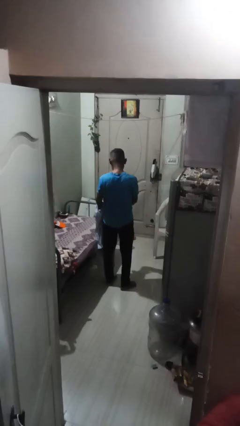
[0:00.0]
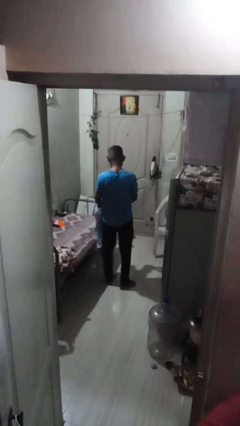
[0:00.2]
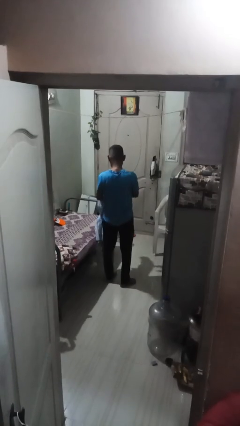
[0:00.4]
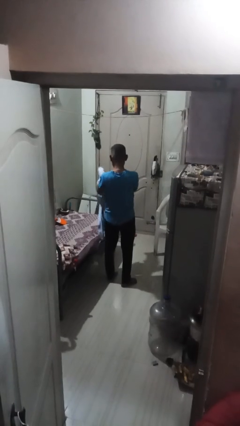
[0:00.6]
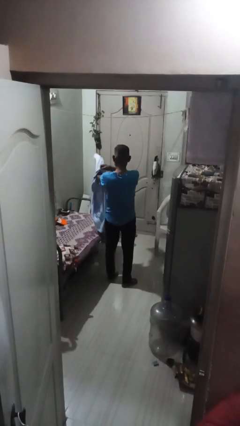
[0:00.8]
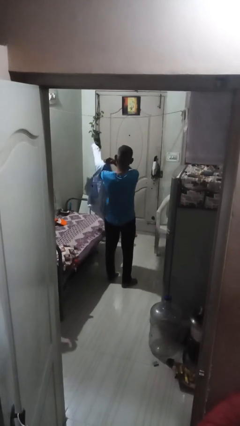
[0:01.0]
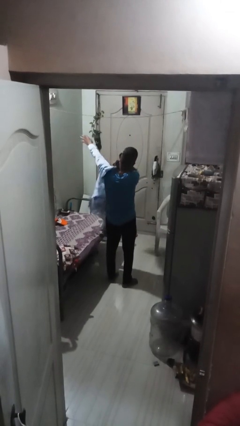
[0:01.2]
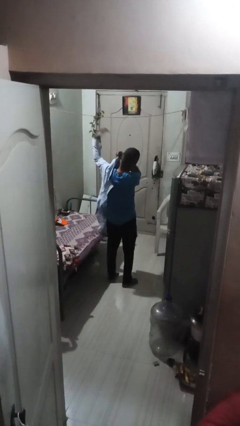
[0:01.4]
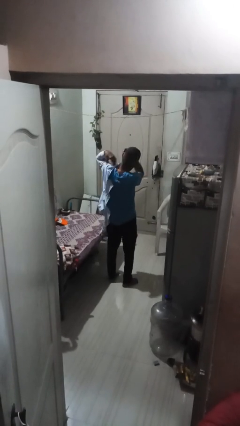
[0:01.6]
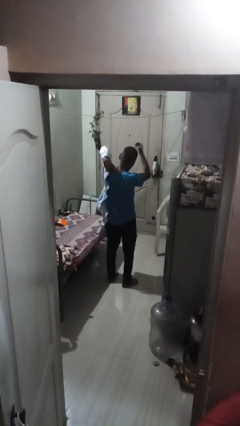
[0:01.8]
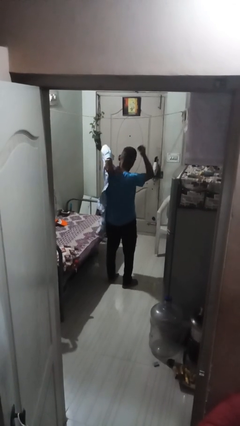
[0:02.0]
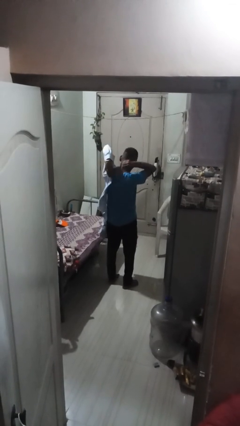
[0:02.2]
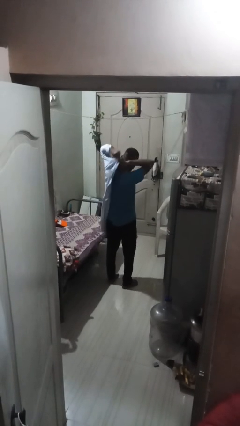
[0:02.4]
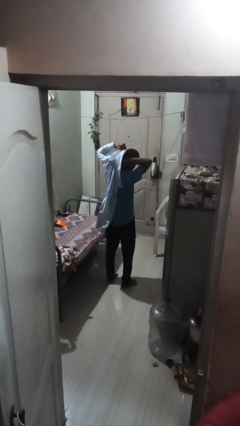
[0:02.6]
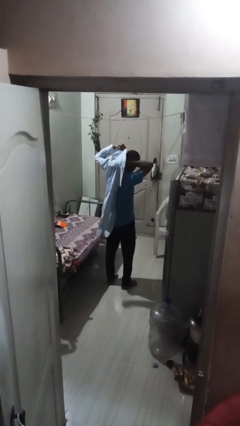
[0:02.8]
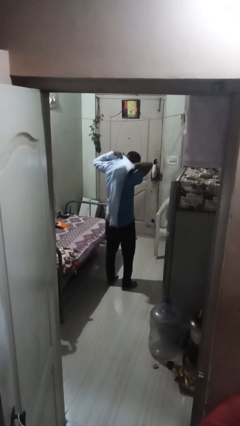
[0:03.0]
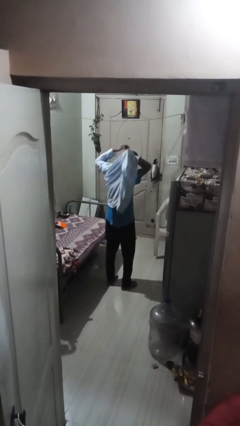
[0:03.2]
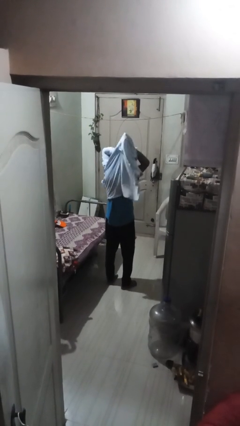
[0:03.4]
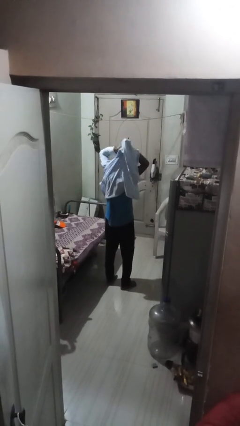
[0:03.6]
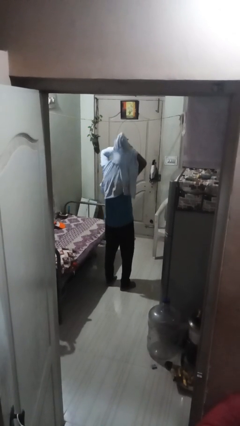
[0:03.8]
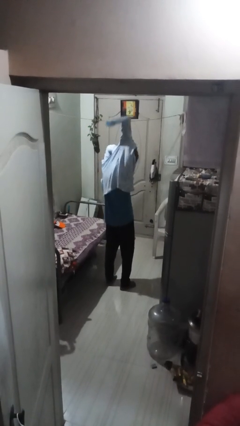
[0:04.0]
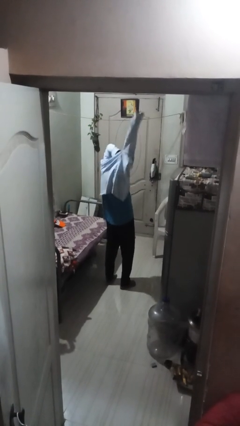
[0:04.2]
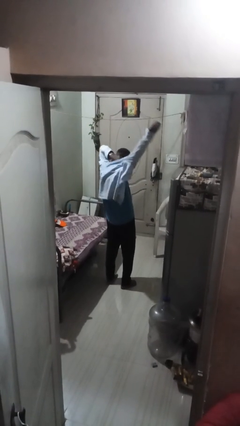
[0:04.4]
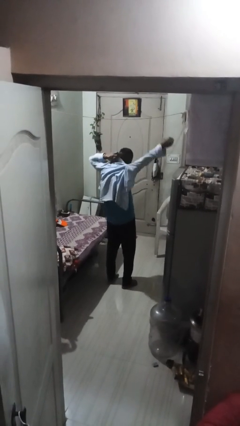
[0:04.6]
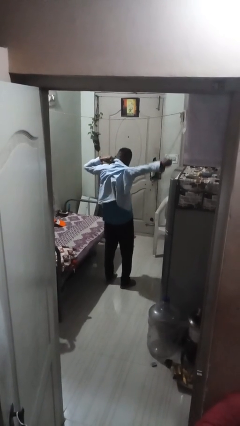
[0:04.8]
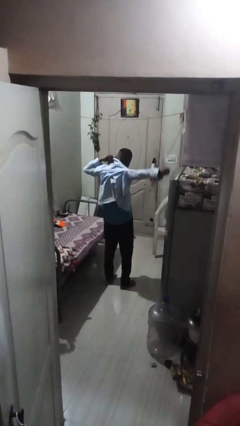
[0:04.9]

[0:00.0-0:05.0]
person puts on shirt

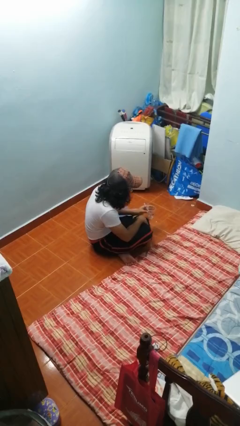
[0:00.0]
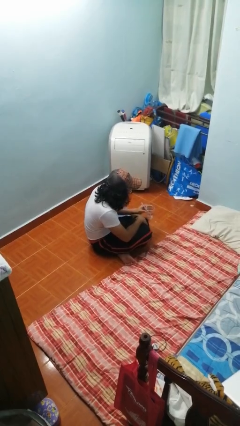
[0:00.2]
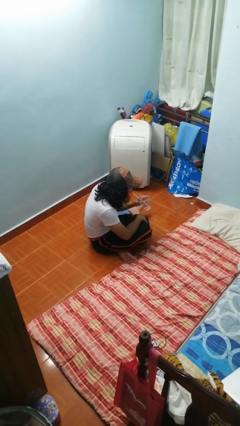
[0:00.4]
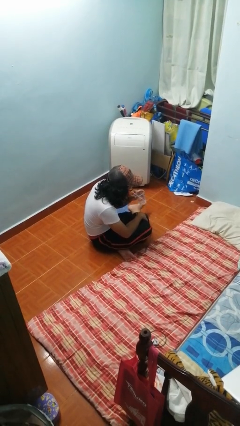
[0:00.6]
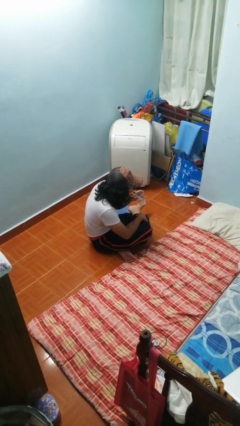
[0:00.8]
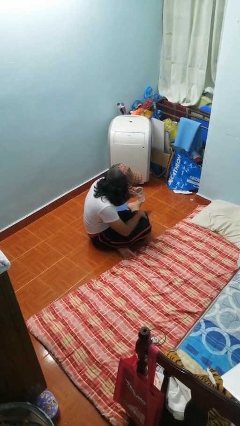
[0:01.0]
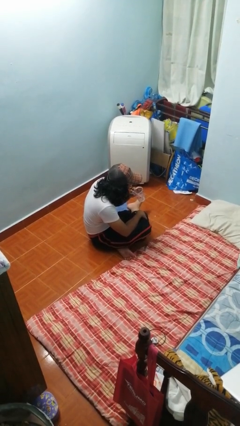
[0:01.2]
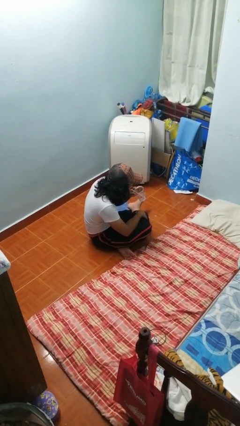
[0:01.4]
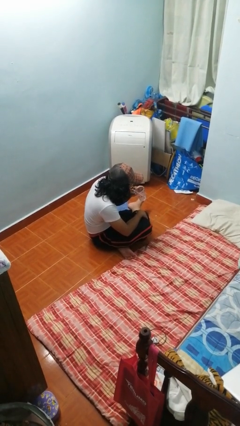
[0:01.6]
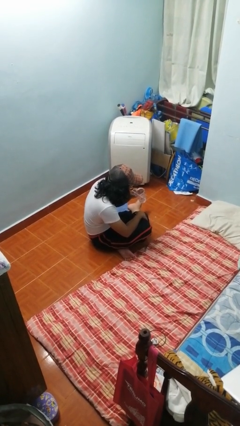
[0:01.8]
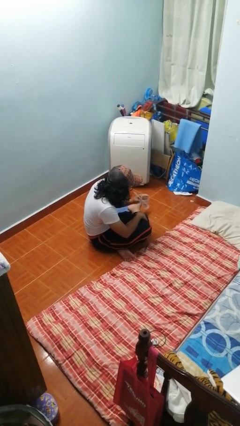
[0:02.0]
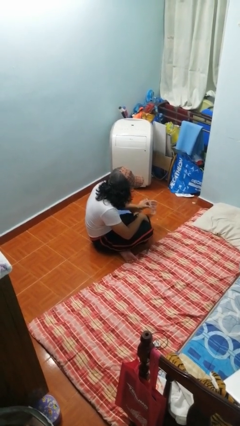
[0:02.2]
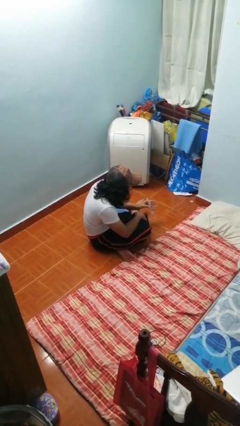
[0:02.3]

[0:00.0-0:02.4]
person drinks from straw

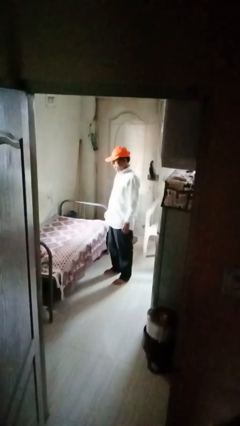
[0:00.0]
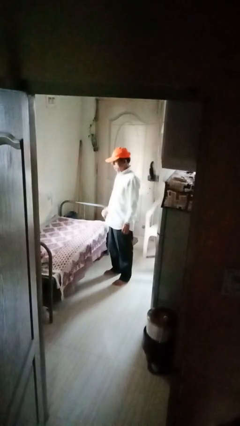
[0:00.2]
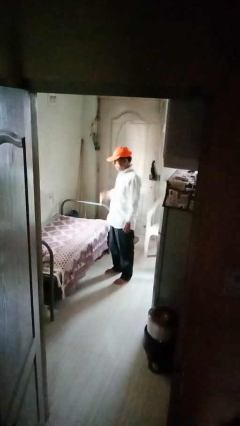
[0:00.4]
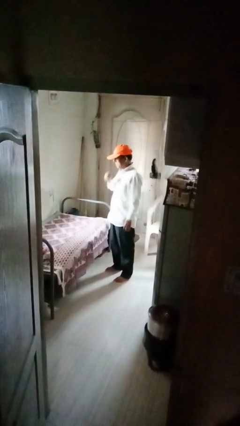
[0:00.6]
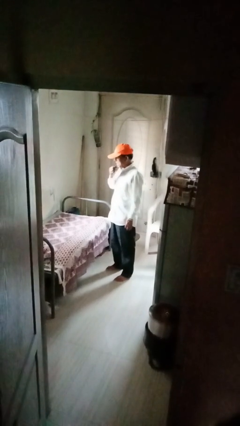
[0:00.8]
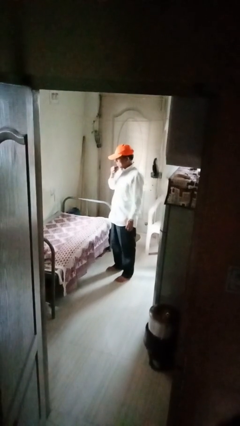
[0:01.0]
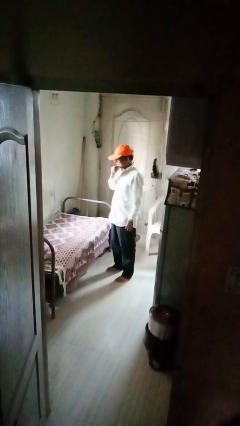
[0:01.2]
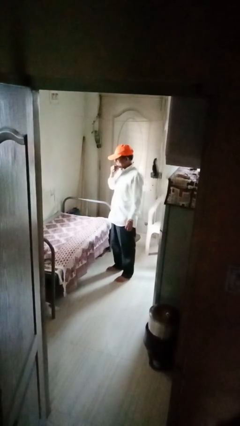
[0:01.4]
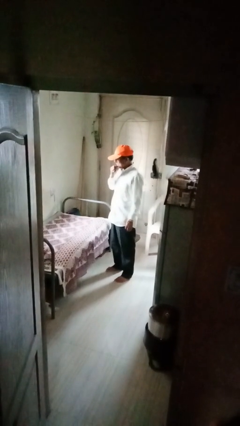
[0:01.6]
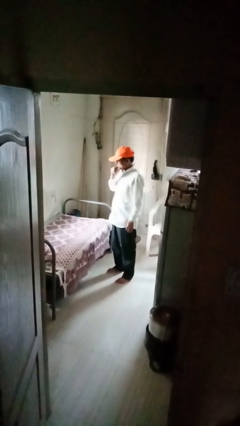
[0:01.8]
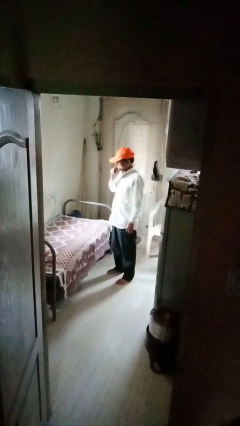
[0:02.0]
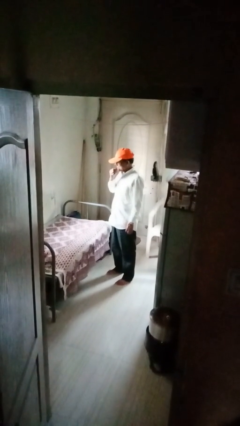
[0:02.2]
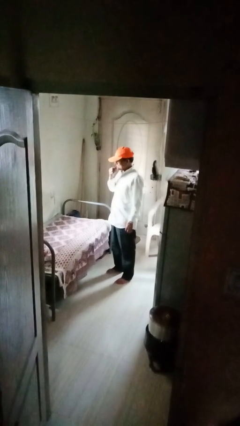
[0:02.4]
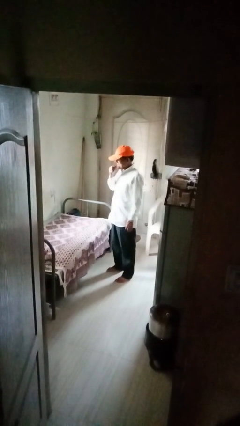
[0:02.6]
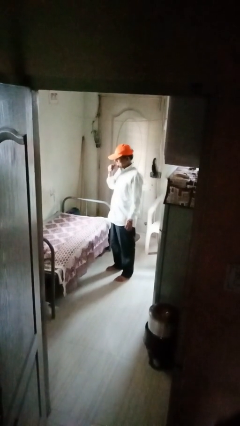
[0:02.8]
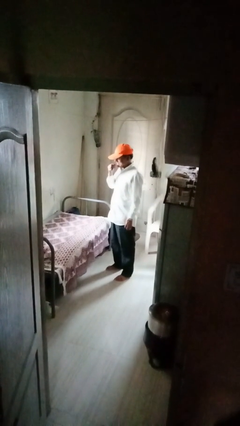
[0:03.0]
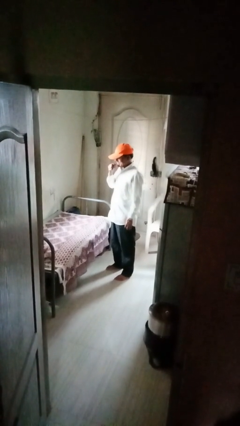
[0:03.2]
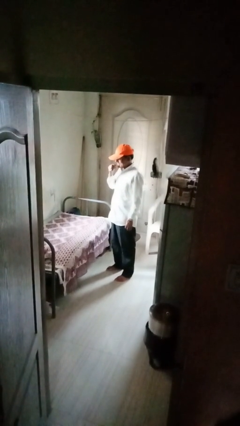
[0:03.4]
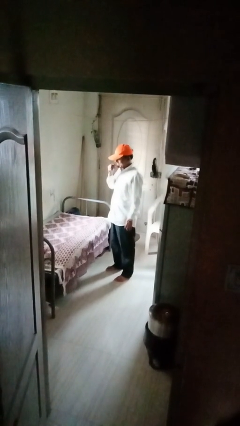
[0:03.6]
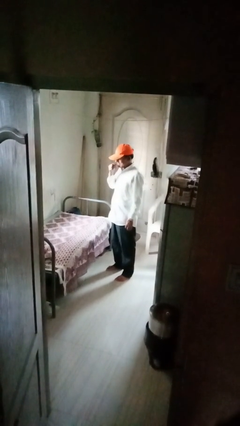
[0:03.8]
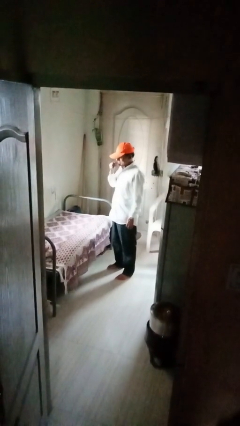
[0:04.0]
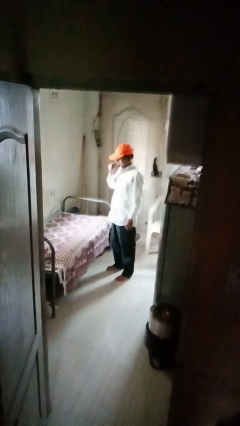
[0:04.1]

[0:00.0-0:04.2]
person flosses

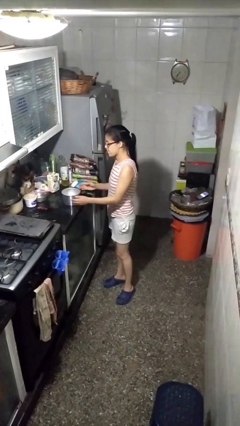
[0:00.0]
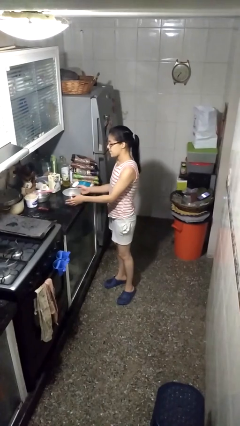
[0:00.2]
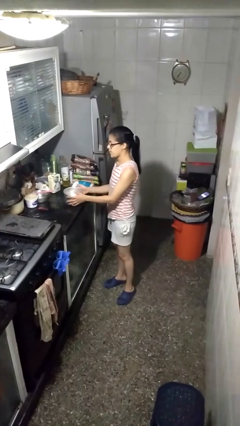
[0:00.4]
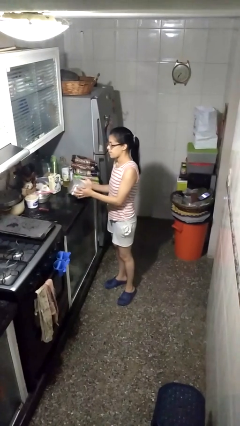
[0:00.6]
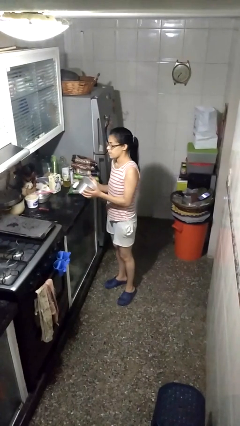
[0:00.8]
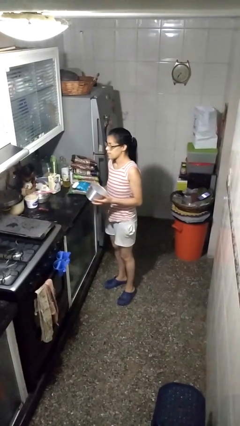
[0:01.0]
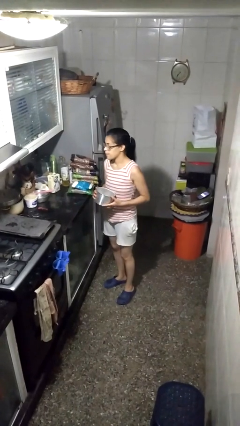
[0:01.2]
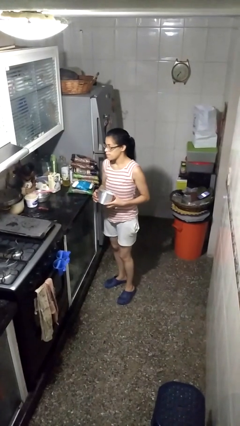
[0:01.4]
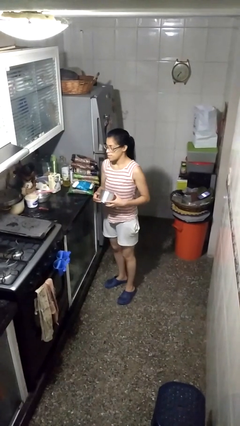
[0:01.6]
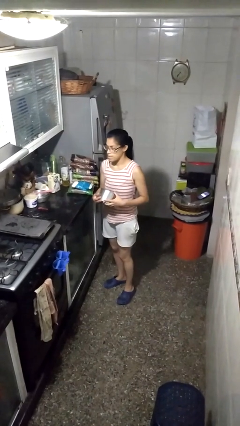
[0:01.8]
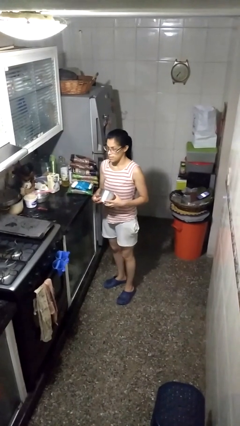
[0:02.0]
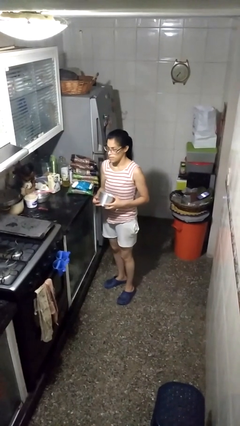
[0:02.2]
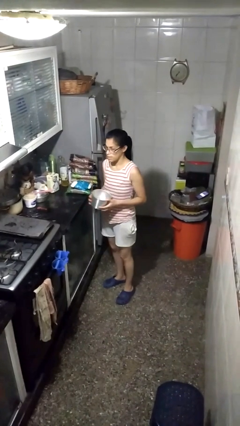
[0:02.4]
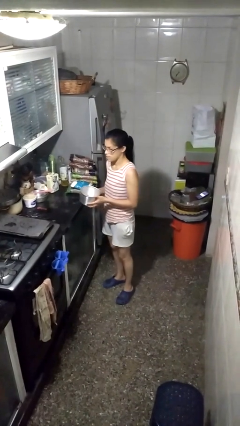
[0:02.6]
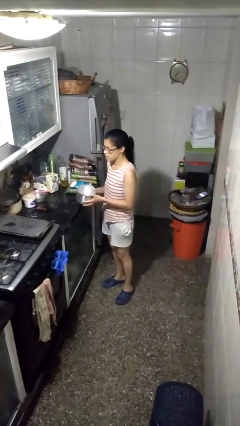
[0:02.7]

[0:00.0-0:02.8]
person picks up object from countertop

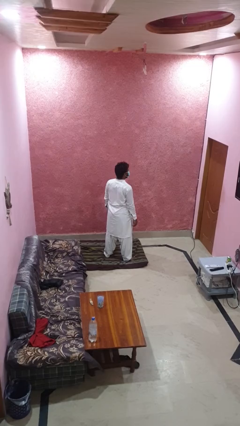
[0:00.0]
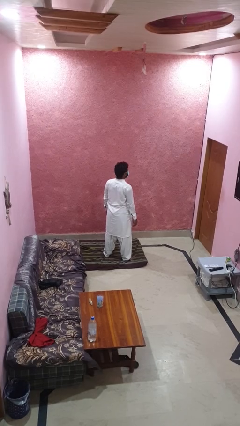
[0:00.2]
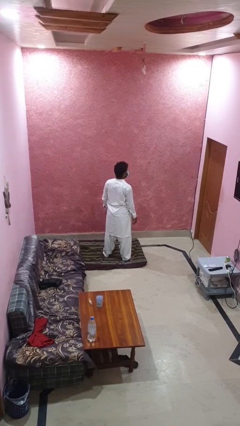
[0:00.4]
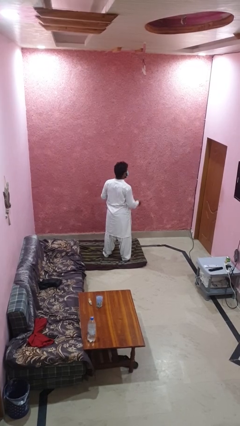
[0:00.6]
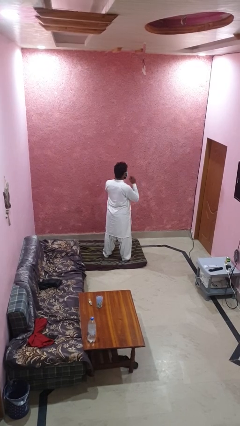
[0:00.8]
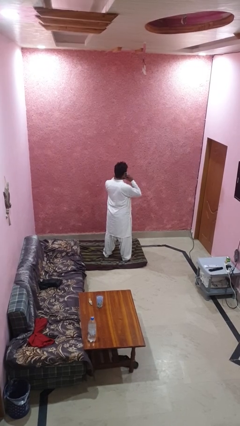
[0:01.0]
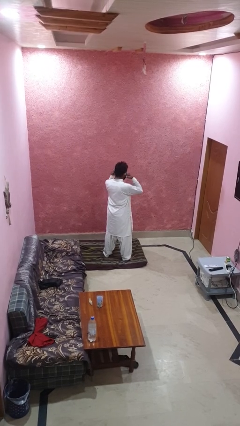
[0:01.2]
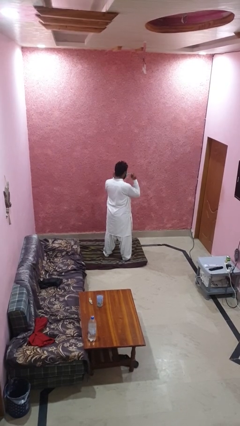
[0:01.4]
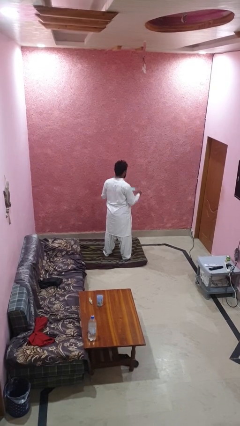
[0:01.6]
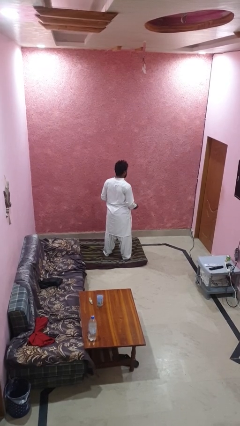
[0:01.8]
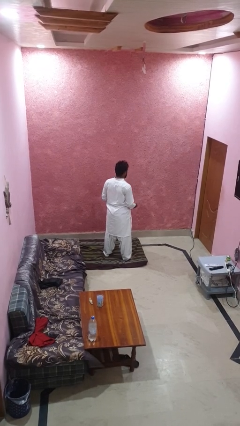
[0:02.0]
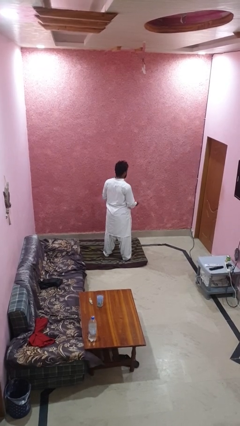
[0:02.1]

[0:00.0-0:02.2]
person takes off facemask

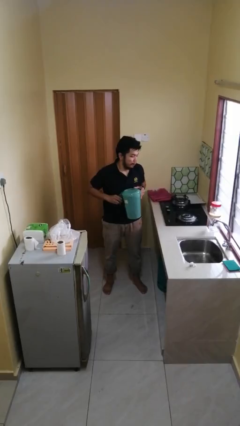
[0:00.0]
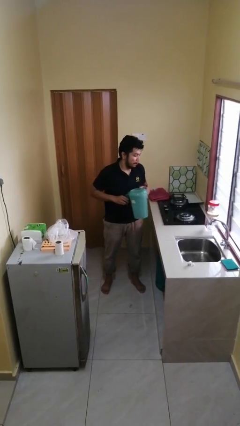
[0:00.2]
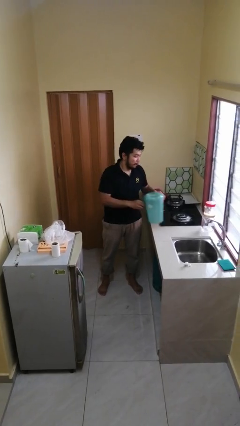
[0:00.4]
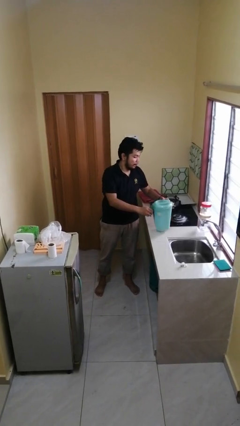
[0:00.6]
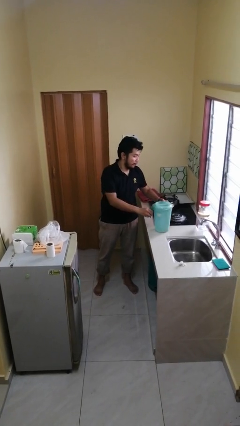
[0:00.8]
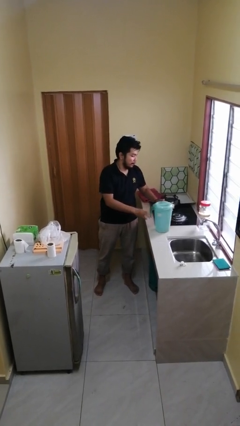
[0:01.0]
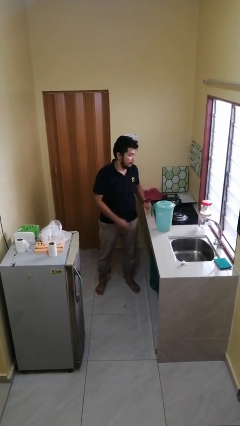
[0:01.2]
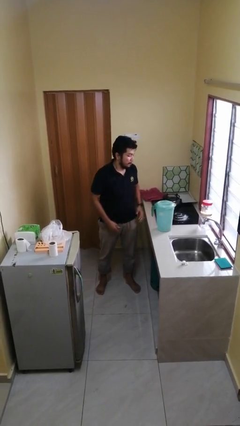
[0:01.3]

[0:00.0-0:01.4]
person puts down object on countertop
